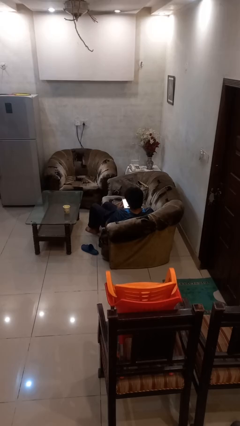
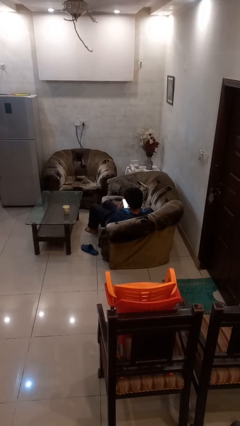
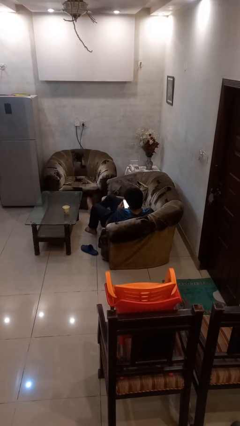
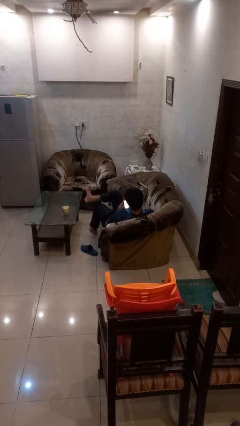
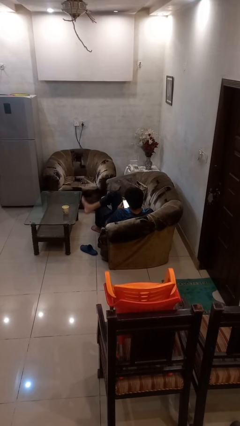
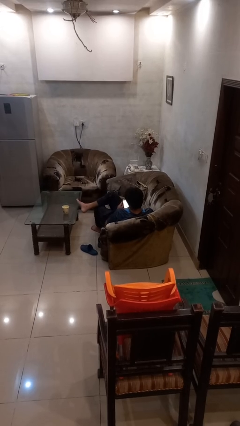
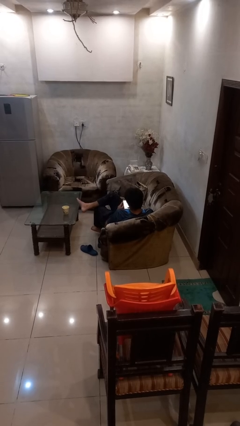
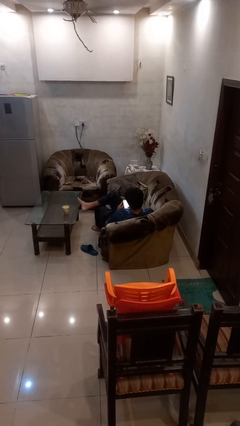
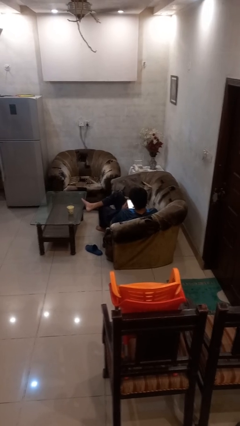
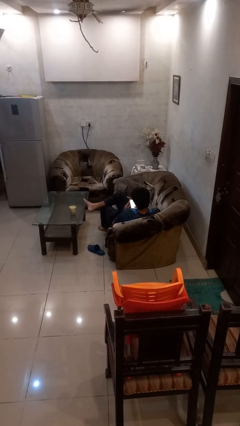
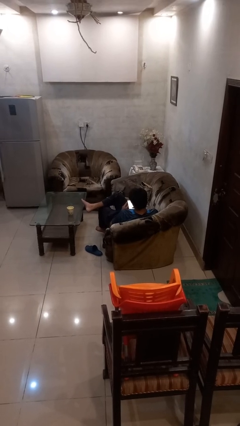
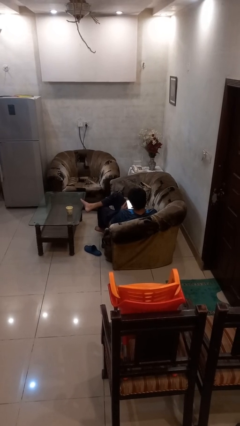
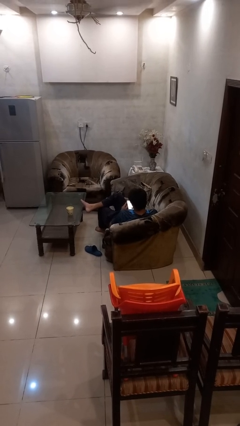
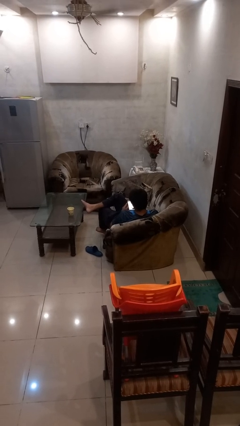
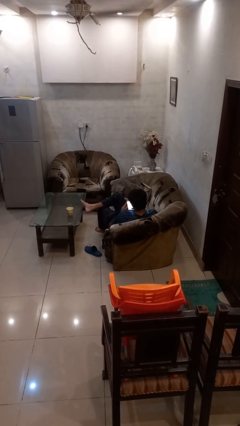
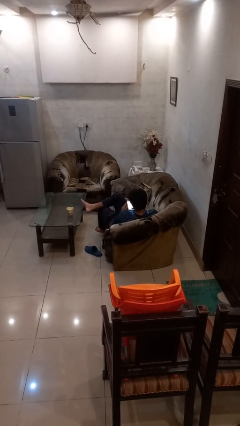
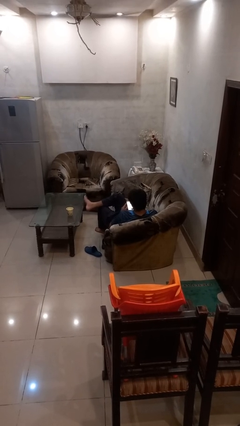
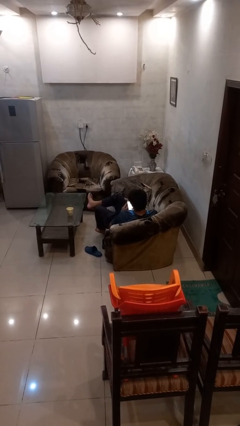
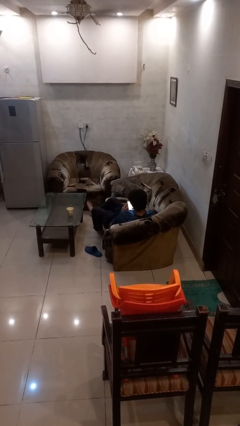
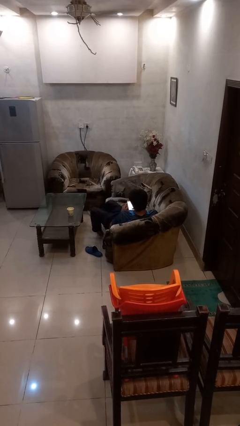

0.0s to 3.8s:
person crosses legs

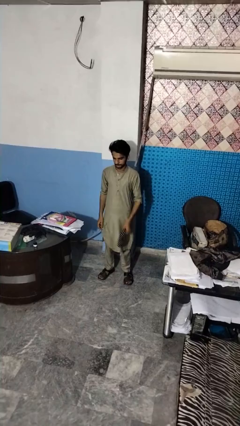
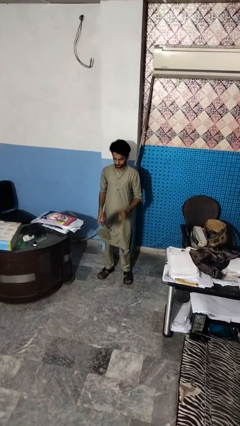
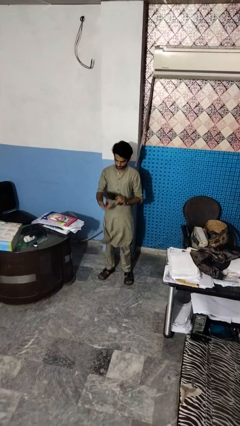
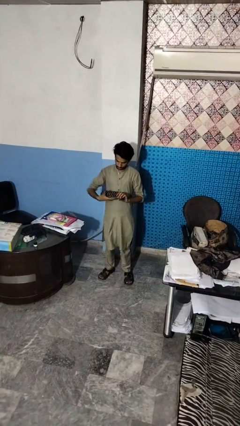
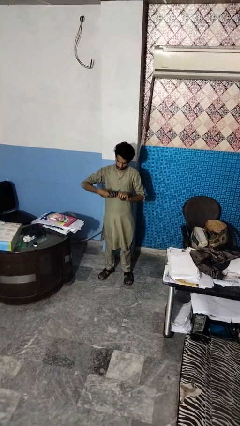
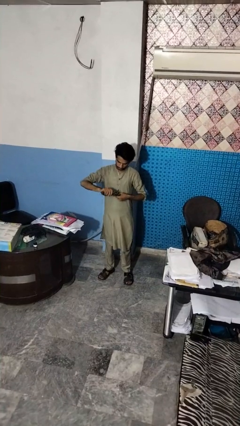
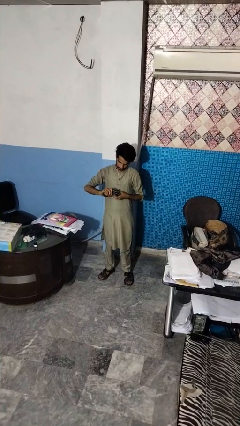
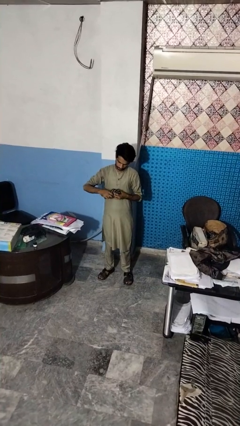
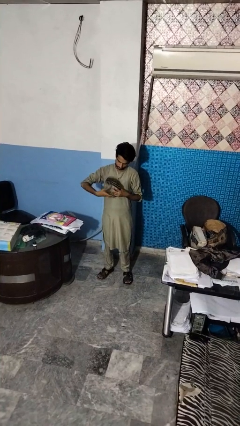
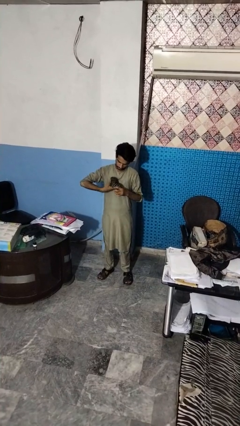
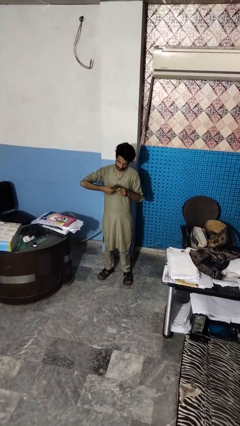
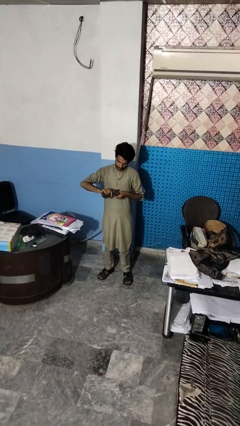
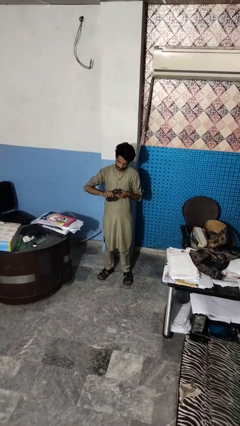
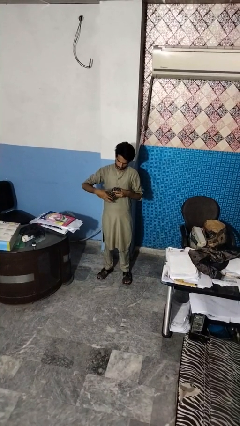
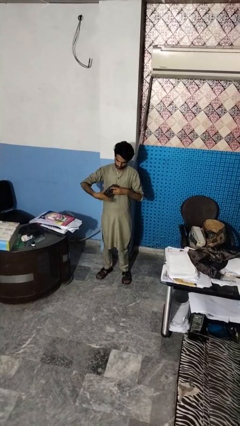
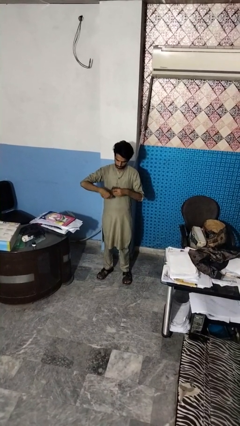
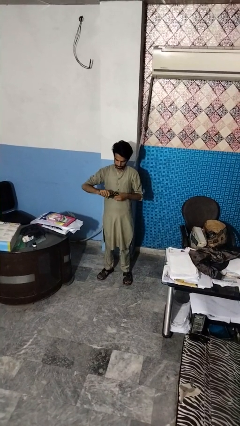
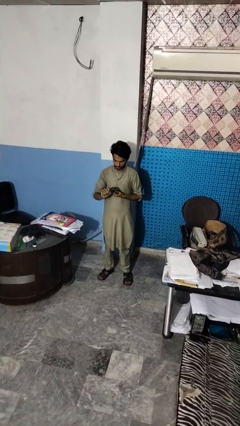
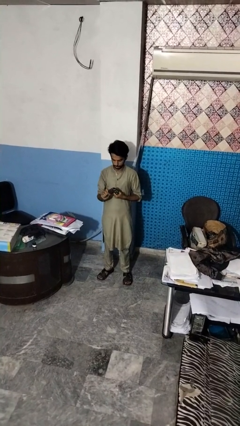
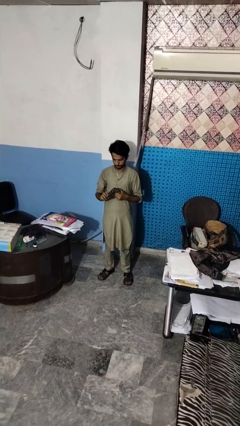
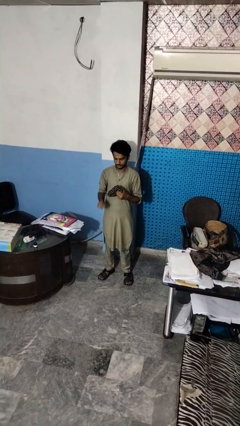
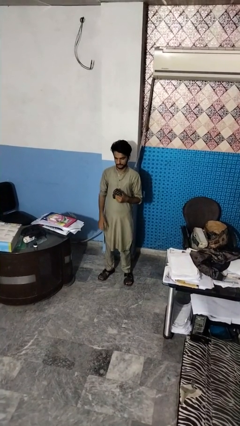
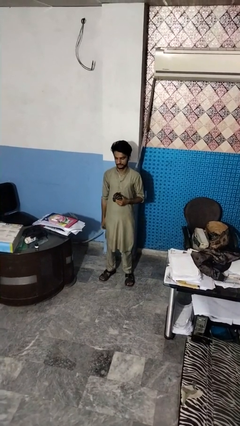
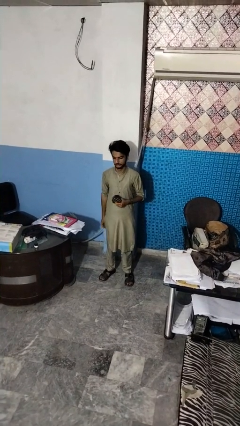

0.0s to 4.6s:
person squeezes object

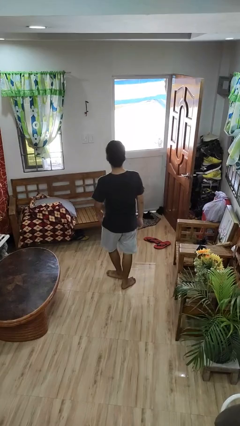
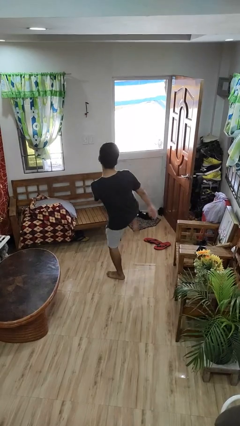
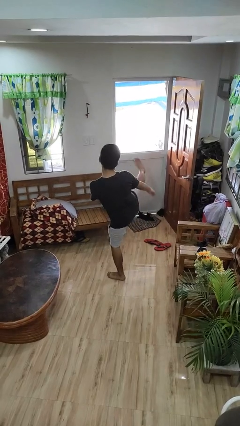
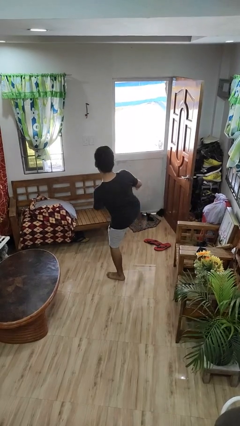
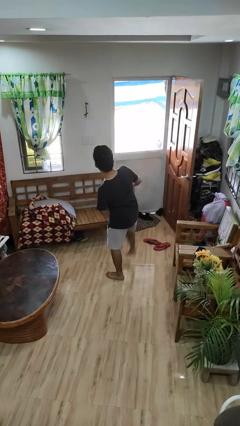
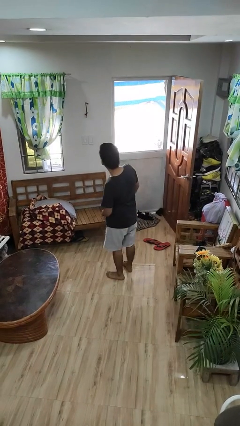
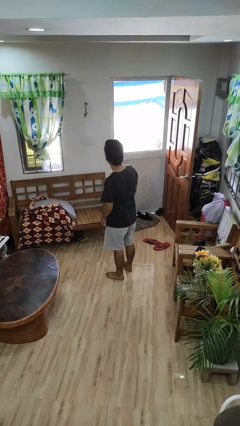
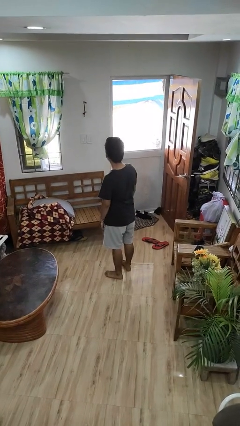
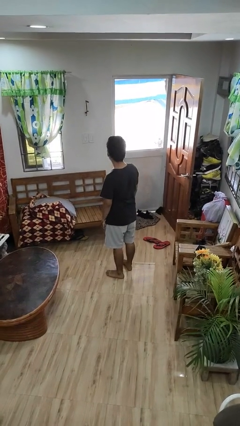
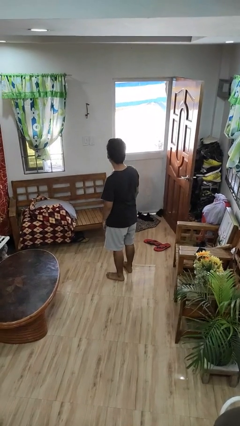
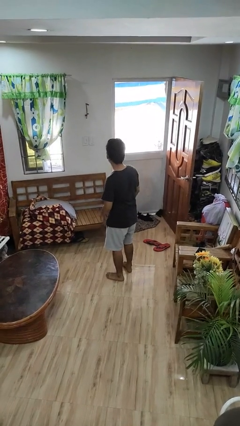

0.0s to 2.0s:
person karate kicks

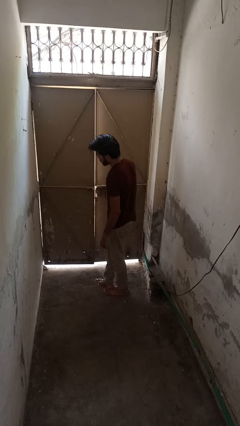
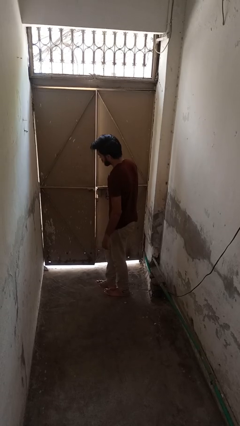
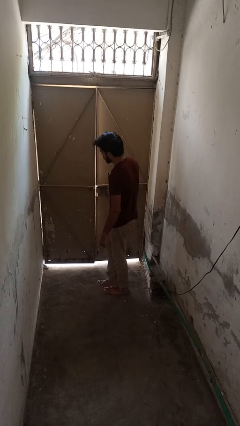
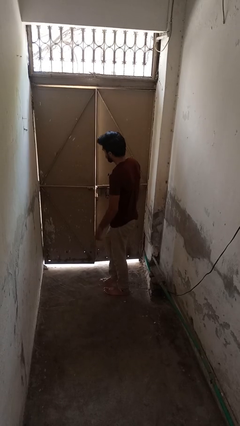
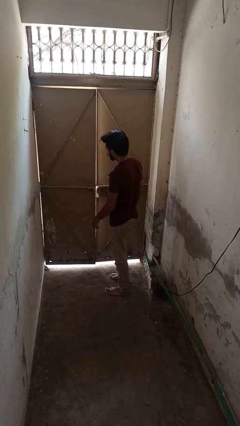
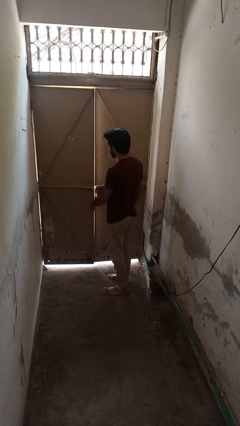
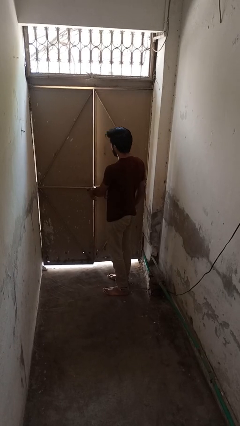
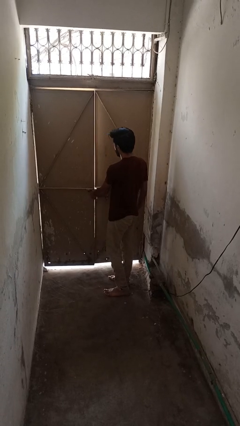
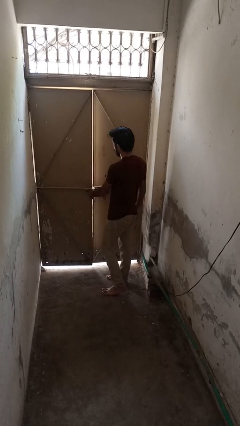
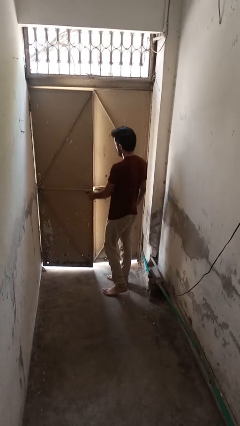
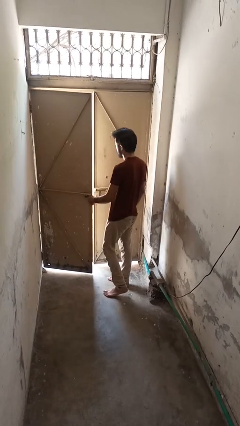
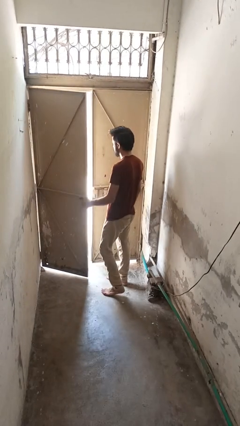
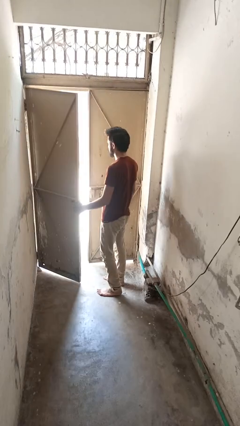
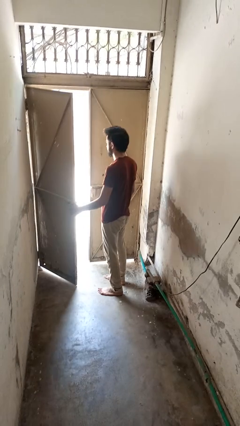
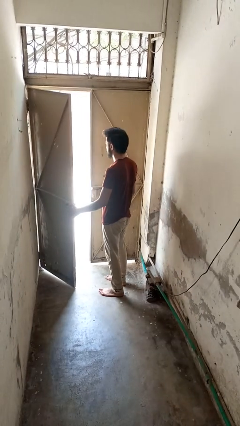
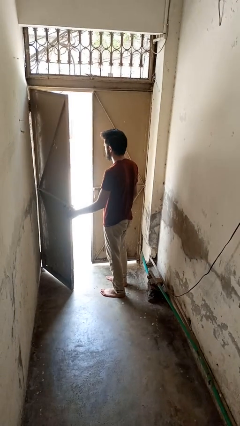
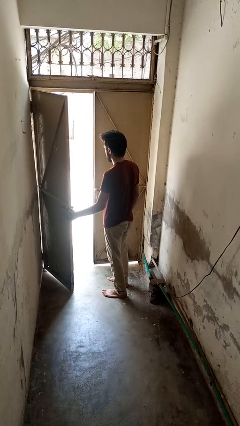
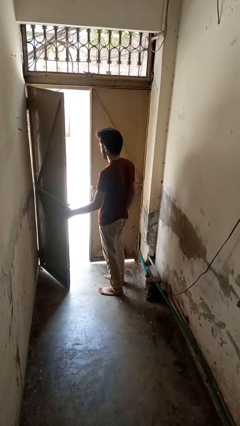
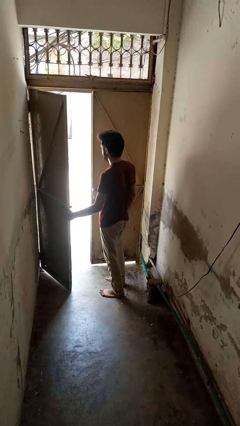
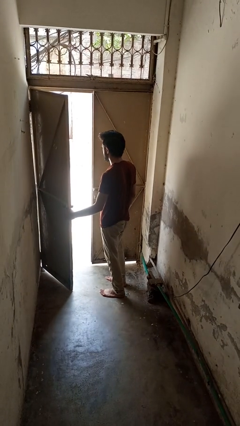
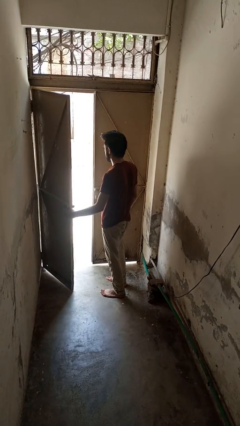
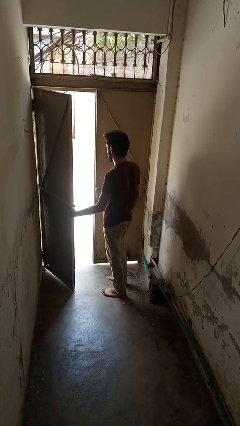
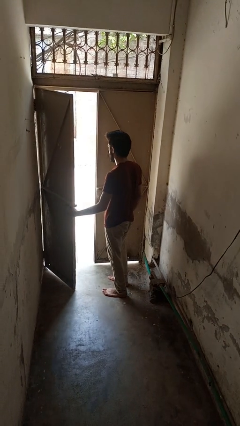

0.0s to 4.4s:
person opens gate

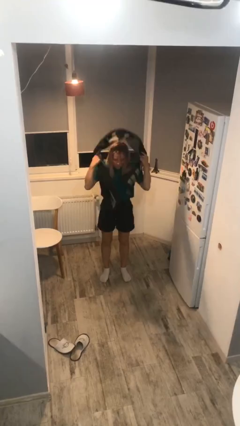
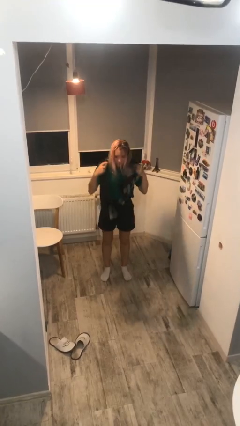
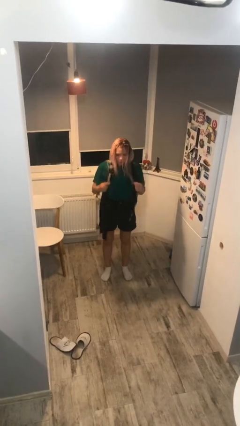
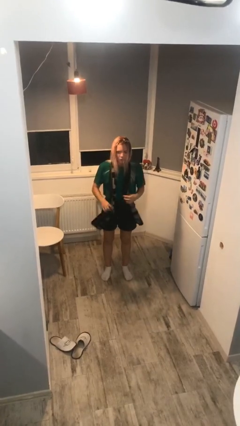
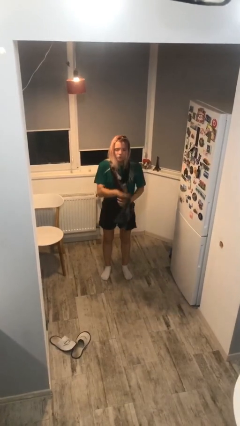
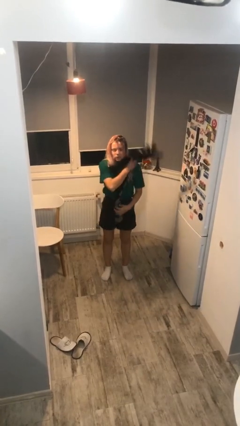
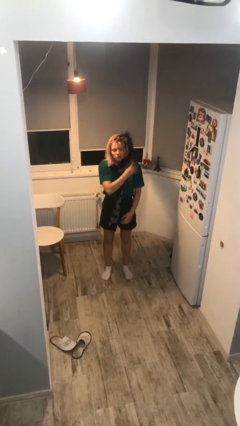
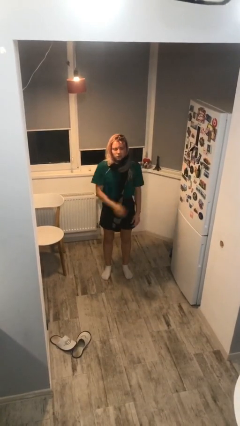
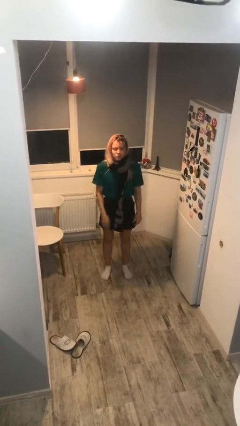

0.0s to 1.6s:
person puts on scarf

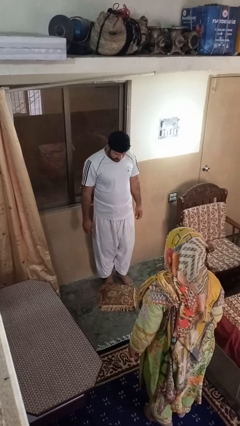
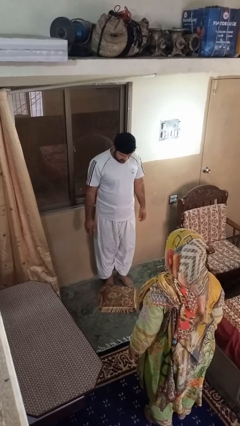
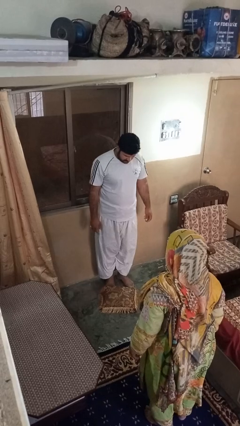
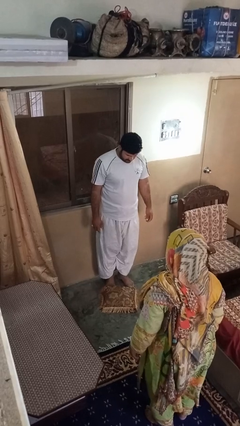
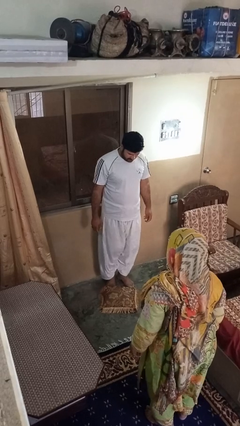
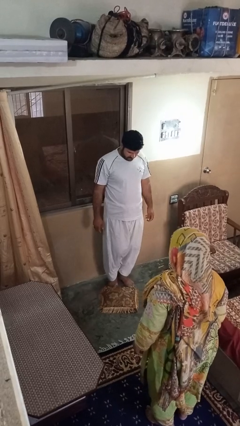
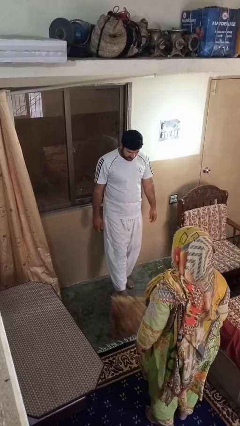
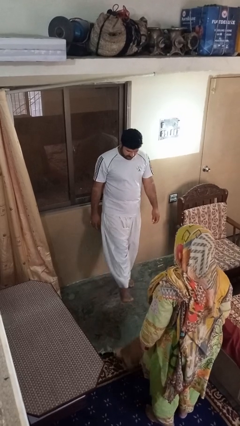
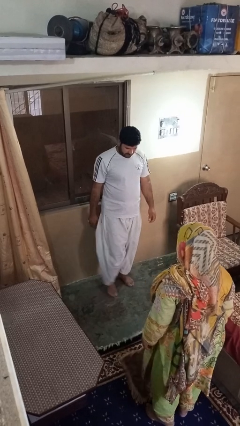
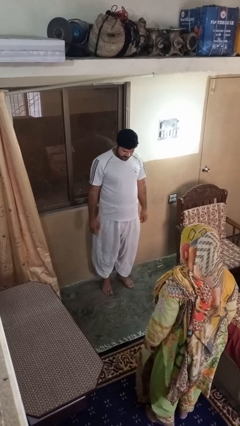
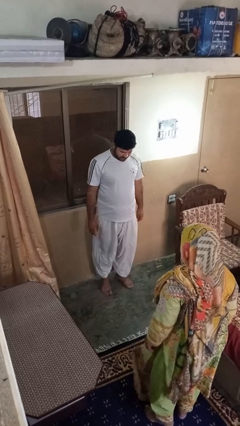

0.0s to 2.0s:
person kicks object to person
